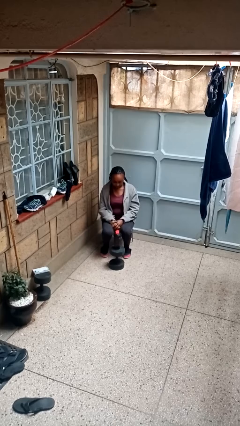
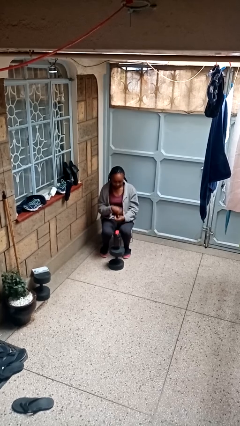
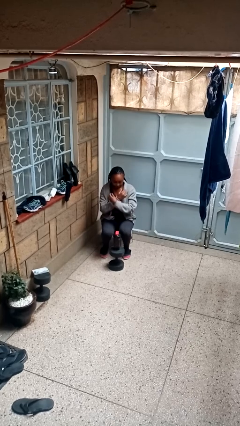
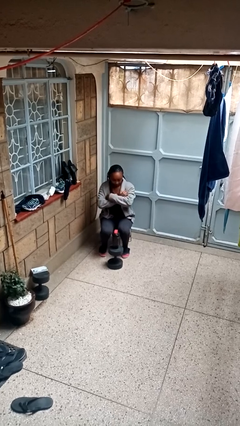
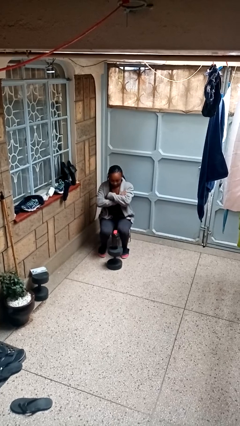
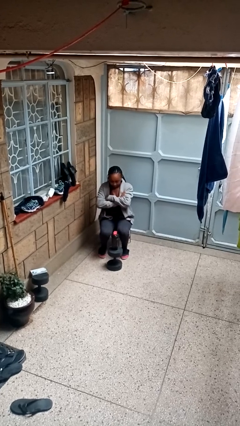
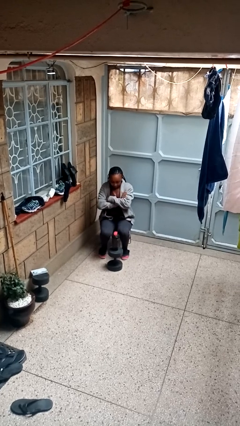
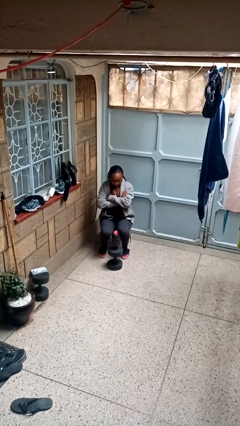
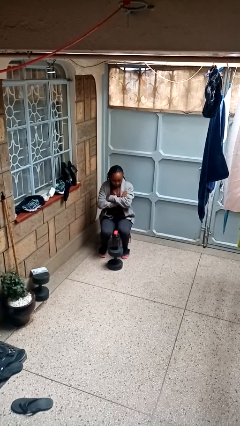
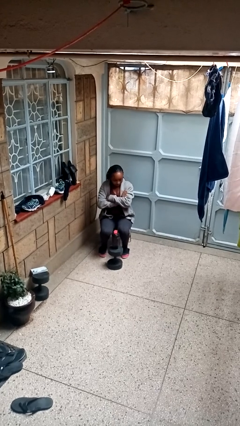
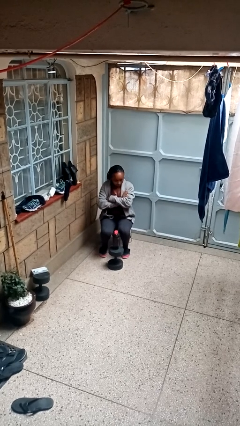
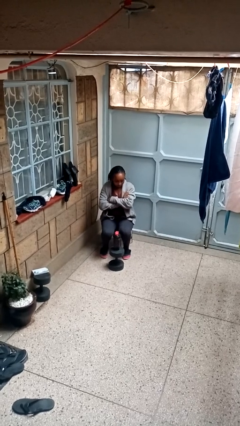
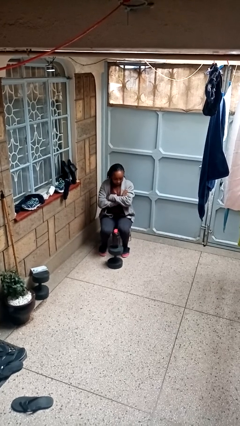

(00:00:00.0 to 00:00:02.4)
person gestures arms x

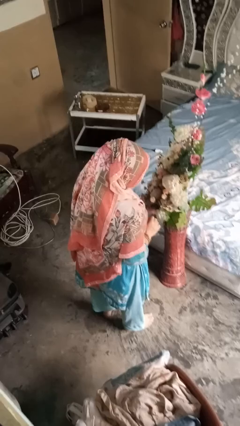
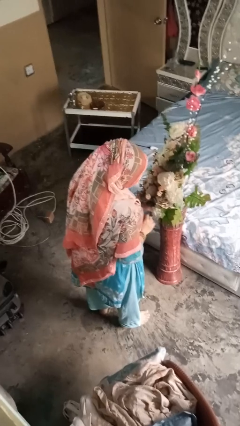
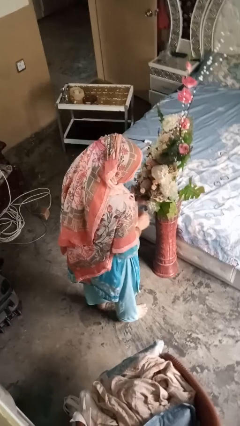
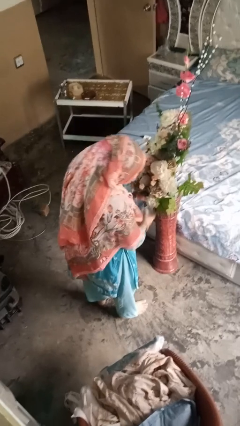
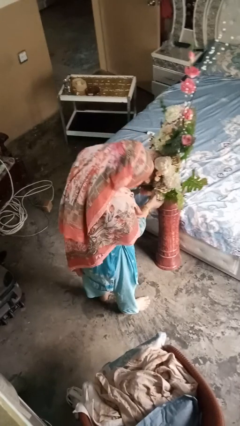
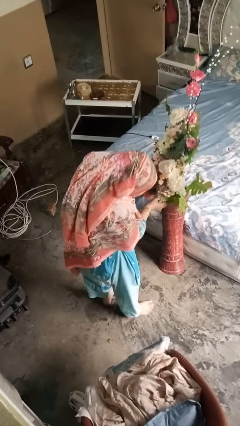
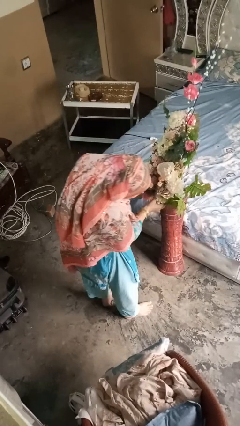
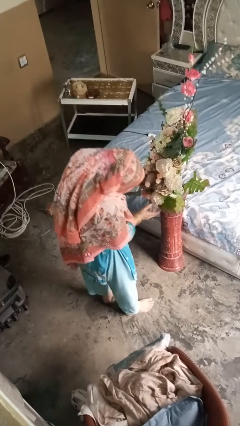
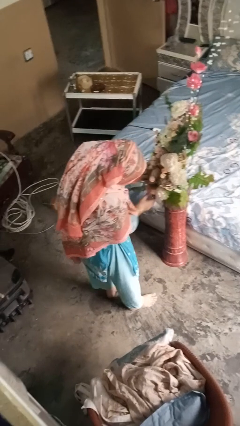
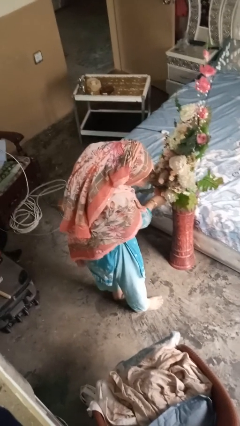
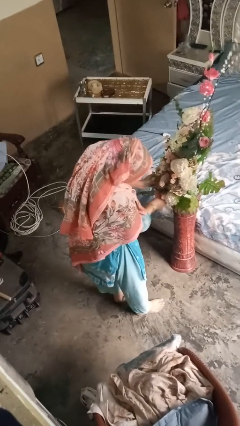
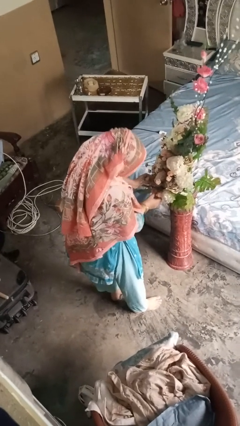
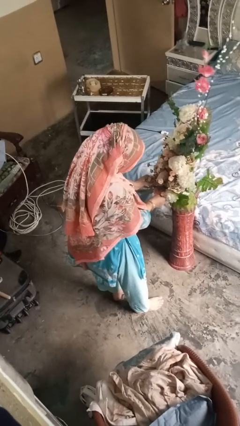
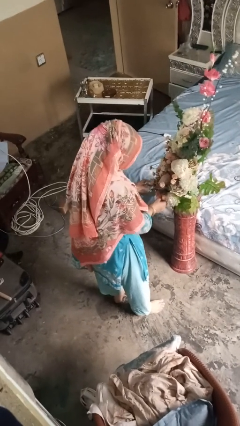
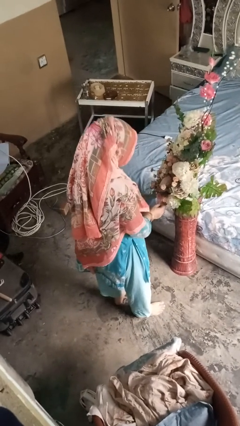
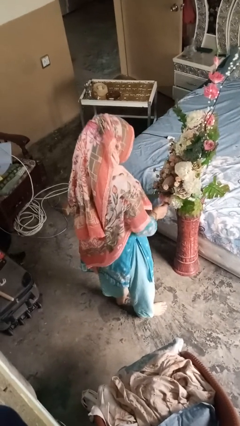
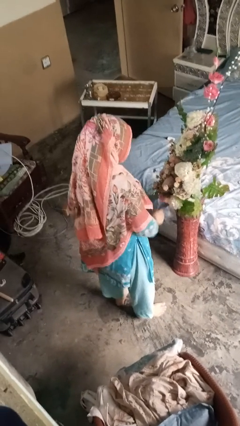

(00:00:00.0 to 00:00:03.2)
person arranges flowers in vase

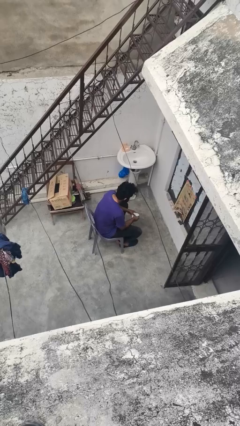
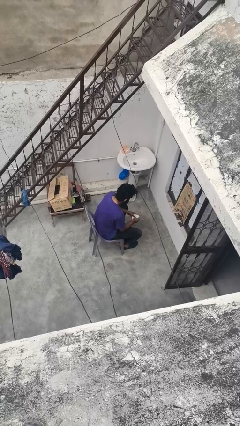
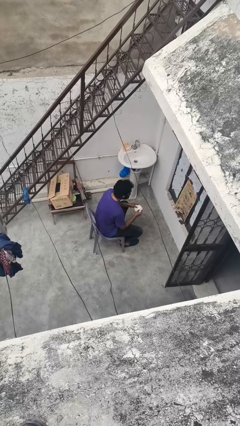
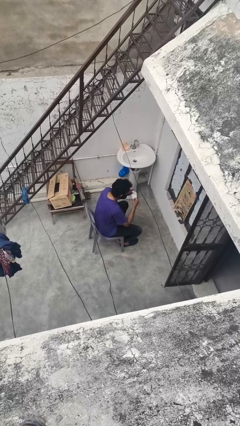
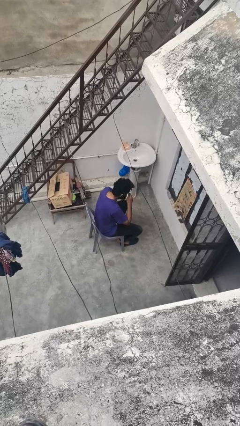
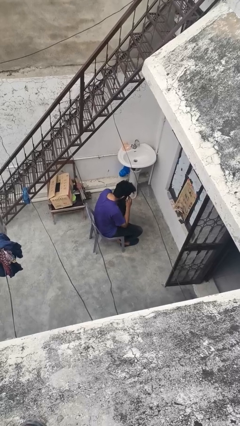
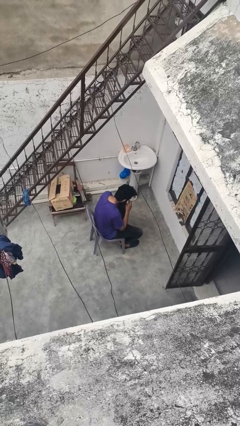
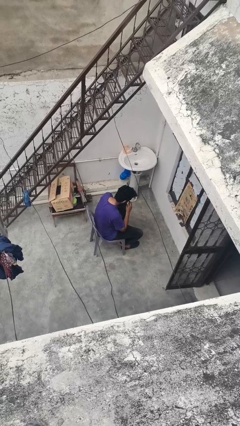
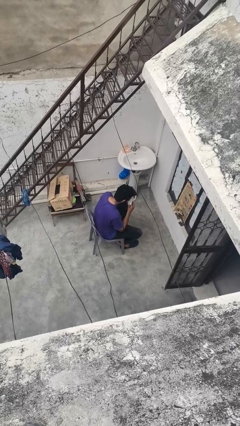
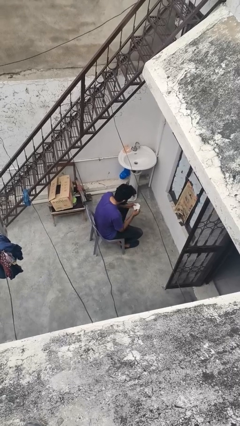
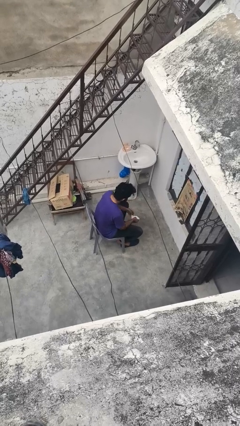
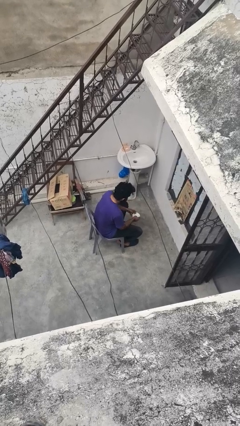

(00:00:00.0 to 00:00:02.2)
person blows nose

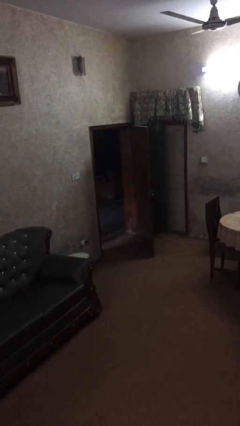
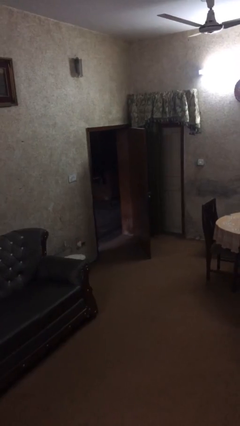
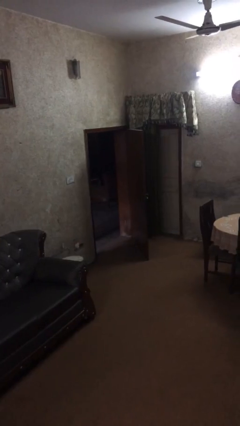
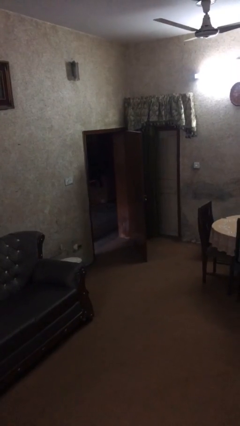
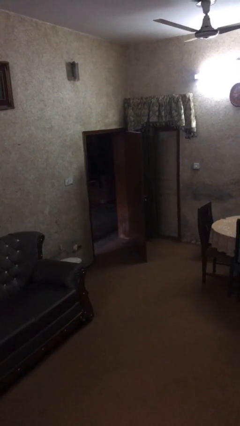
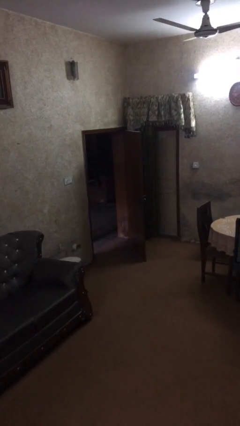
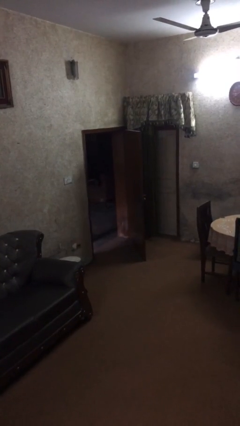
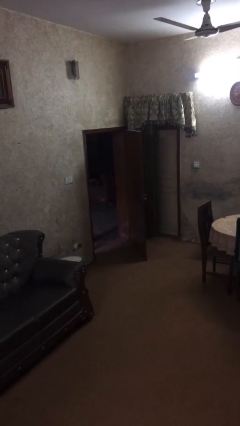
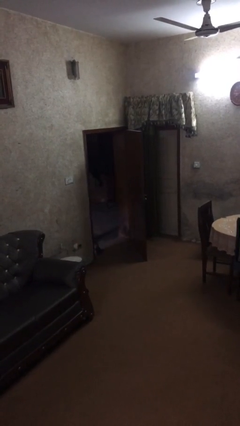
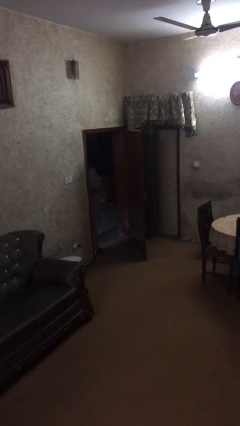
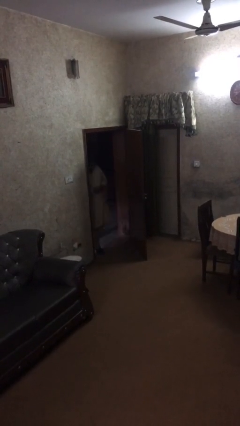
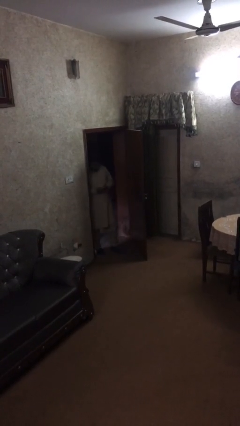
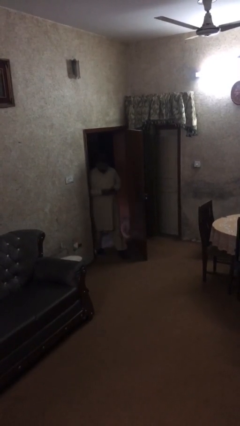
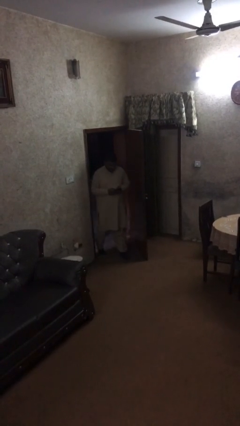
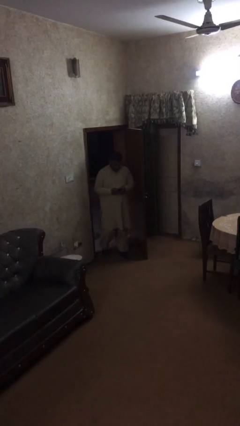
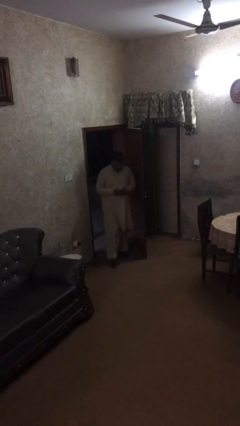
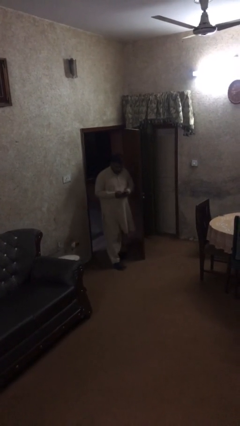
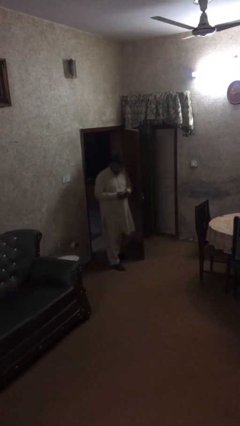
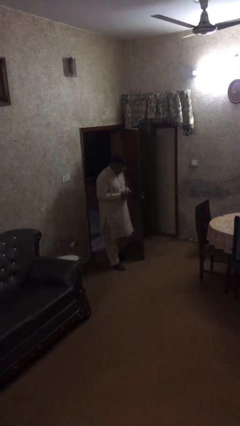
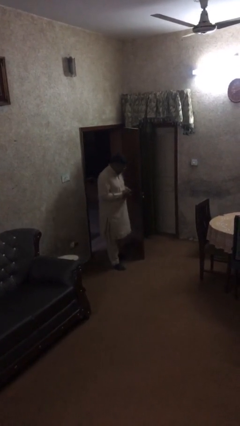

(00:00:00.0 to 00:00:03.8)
person enters scene through structure

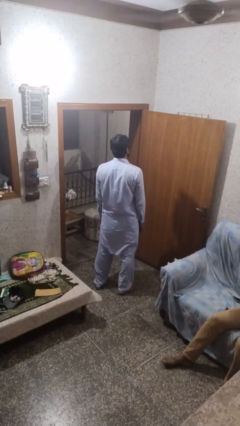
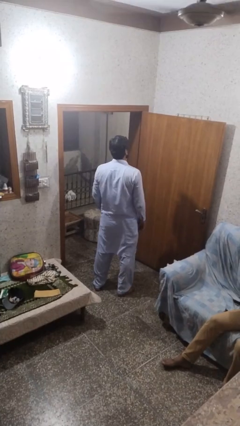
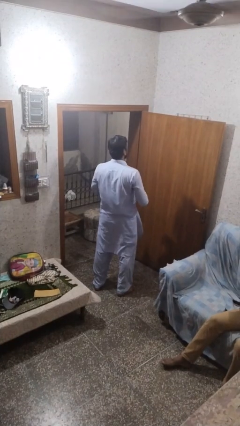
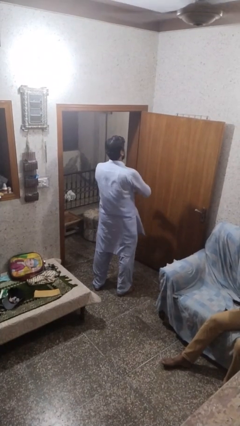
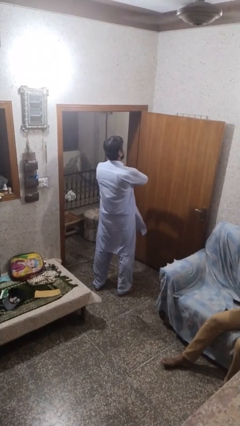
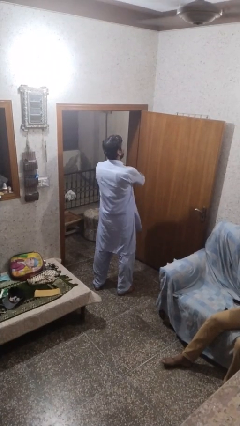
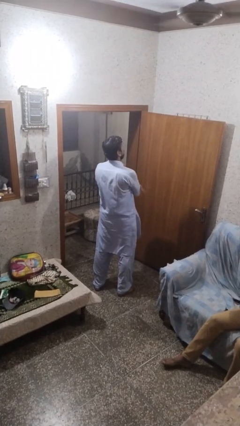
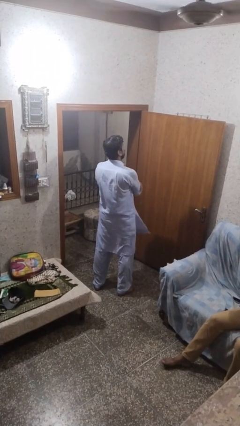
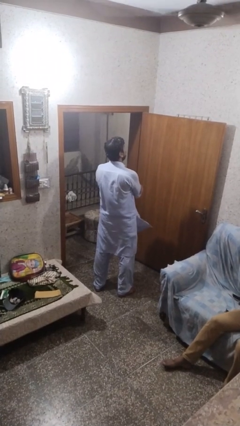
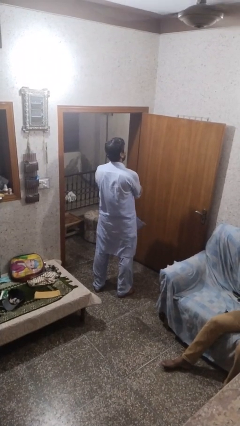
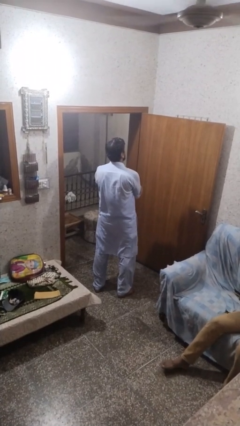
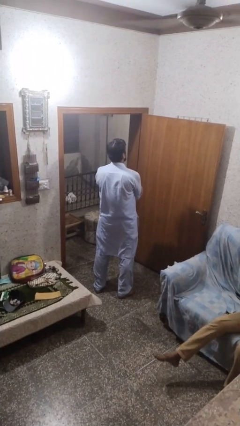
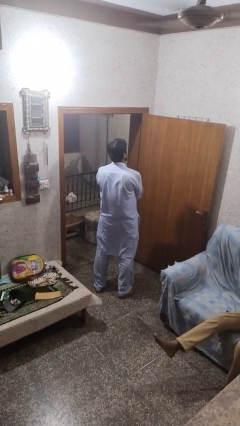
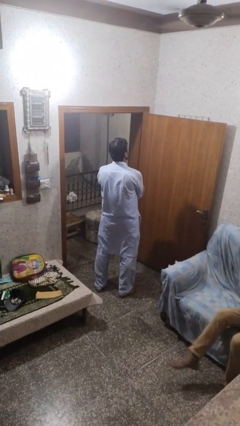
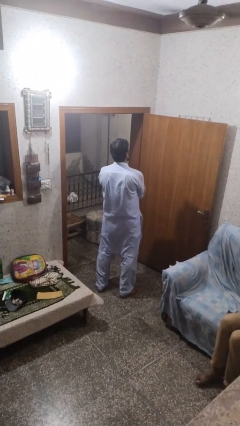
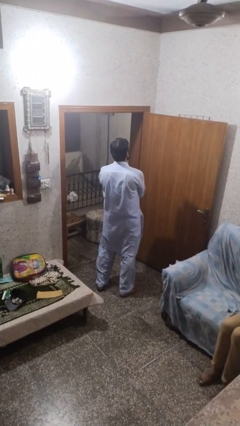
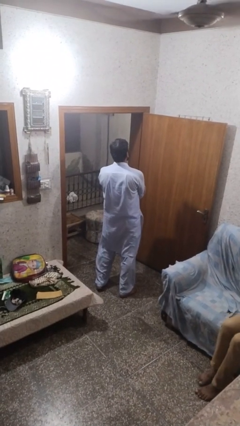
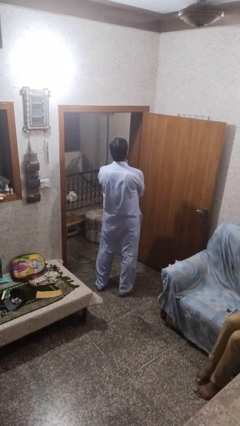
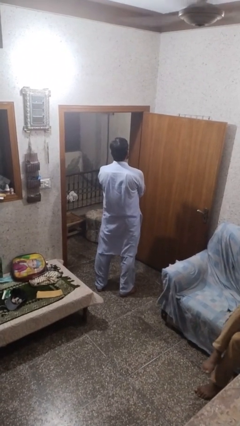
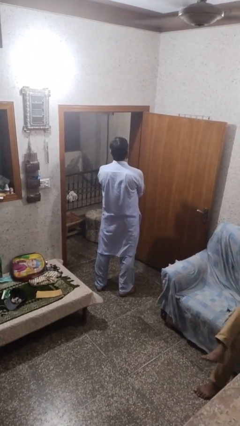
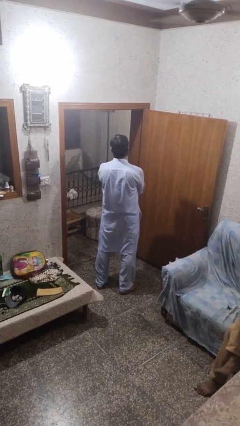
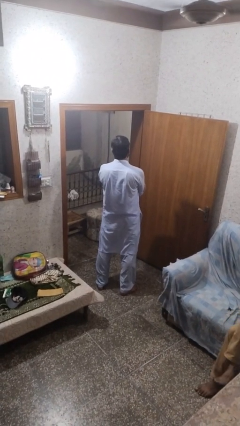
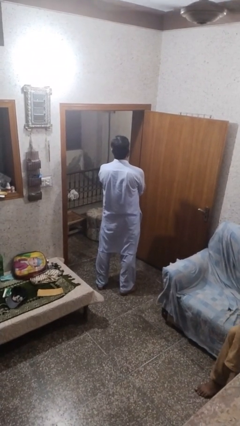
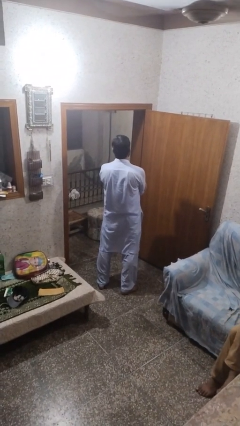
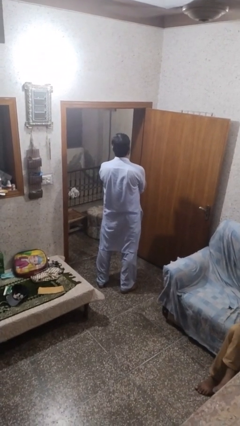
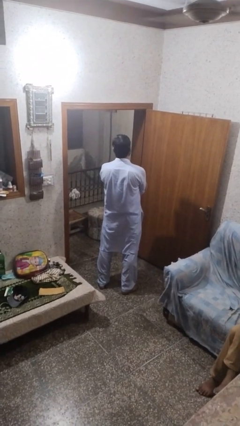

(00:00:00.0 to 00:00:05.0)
person crosses arms

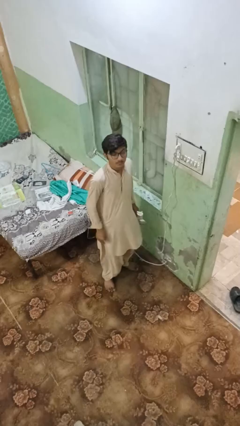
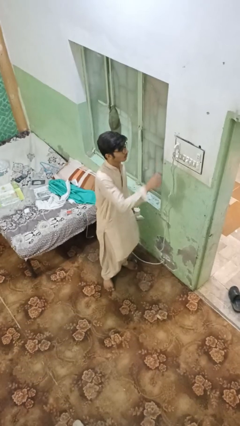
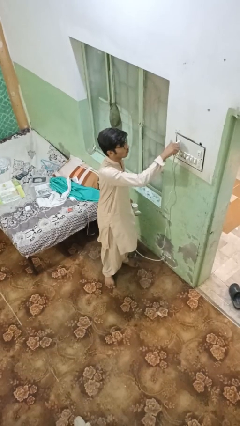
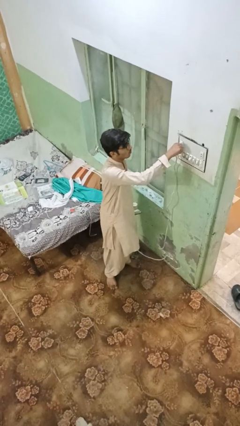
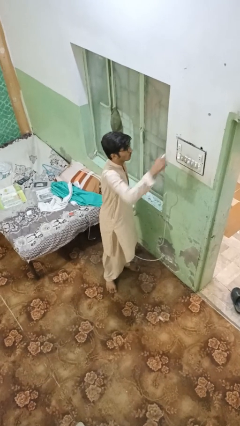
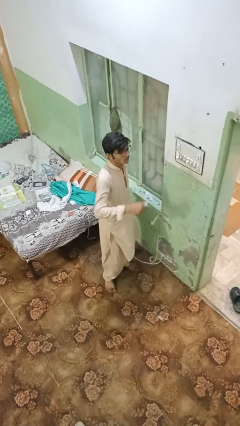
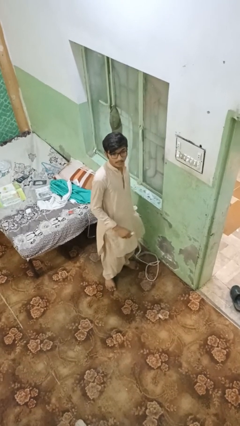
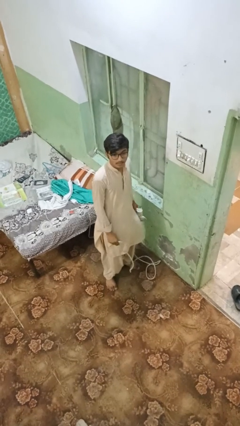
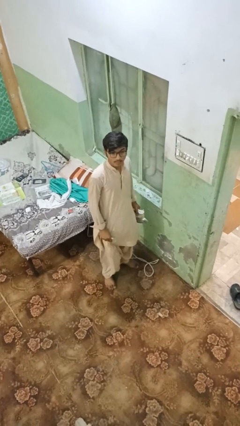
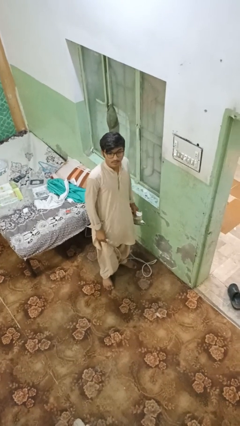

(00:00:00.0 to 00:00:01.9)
person unplugs from electrical socket
